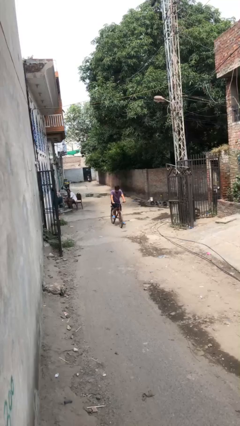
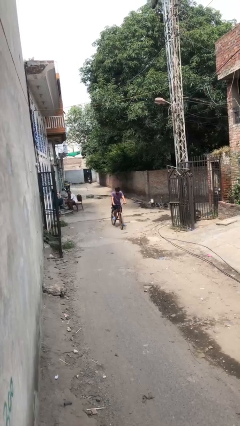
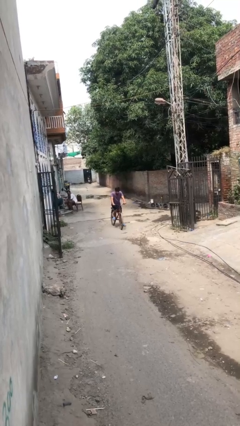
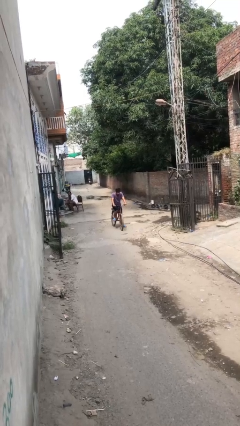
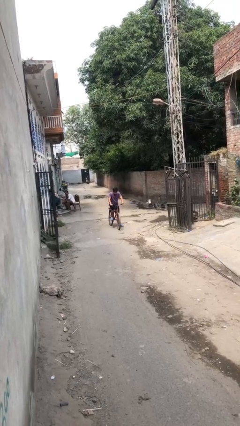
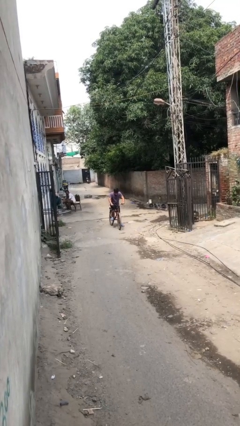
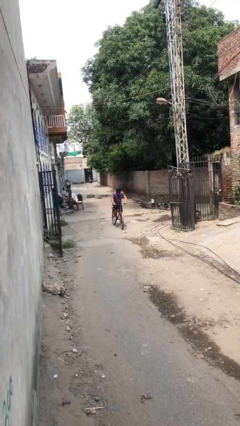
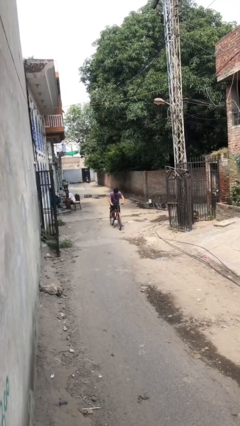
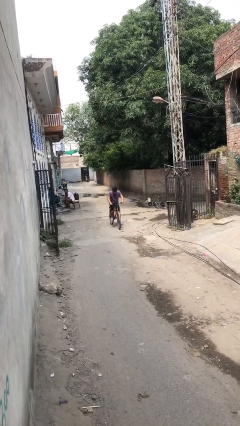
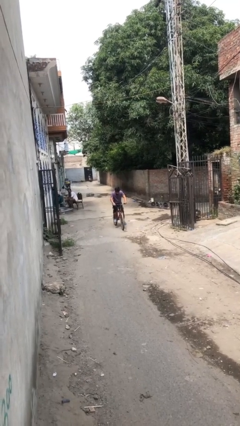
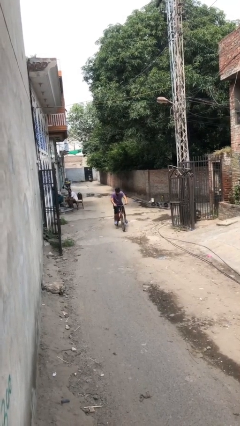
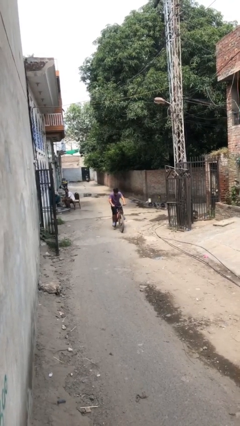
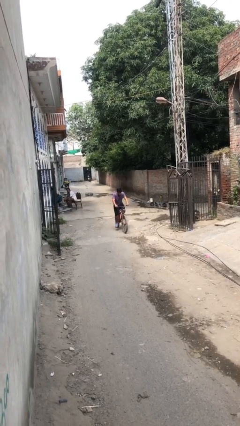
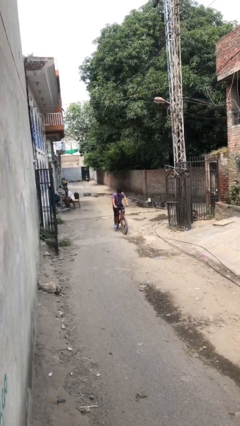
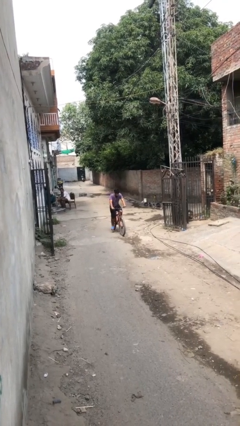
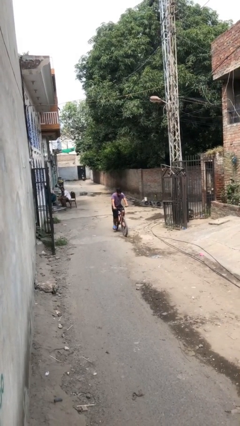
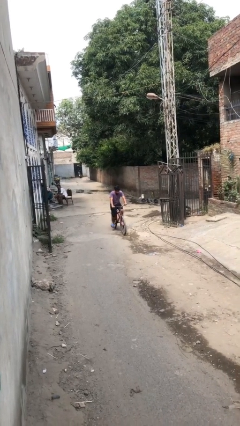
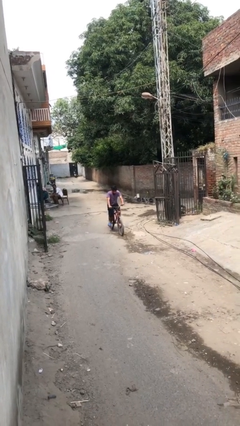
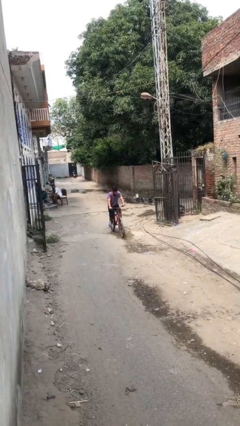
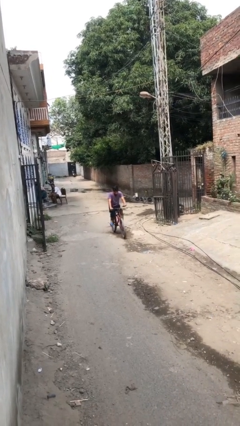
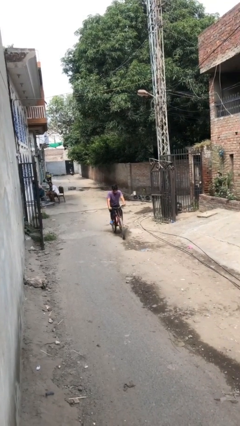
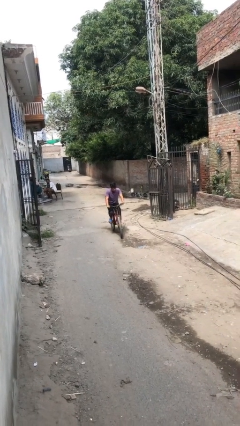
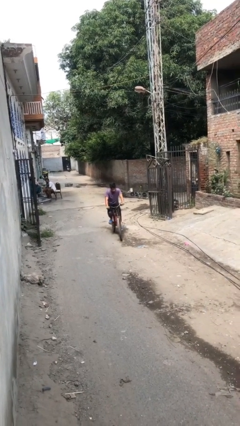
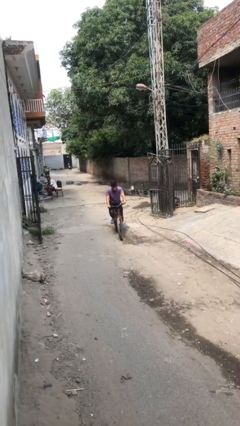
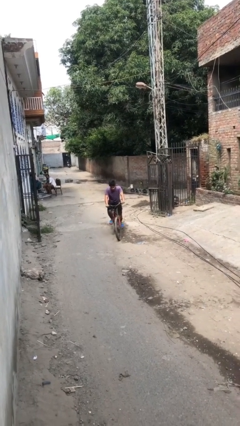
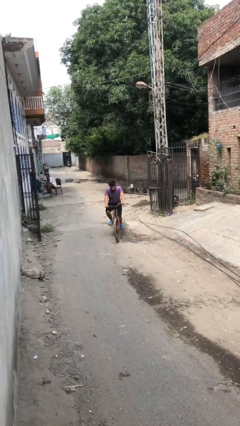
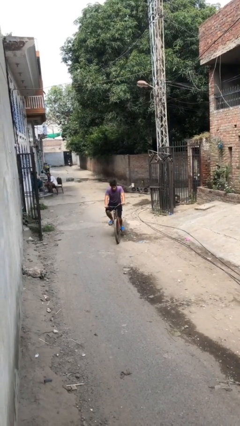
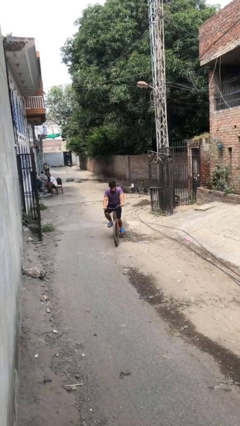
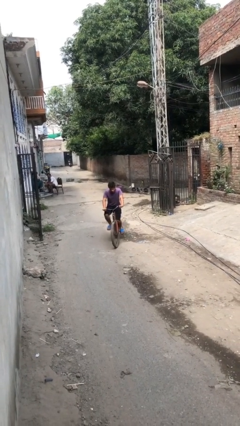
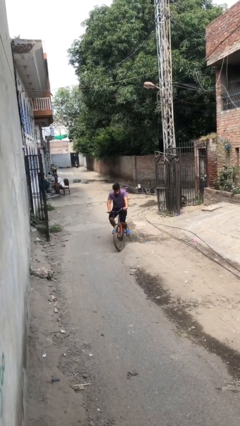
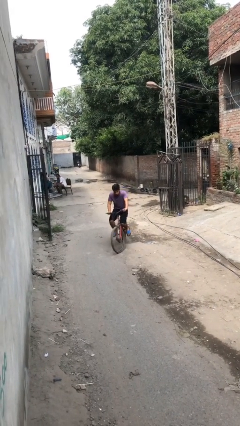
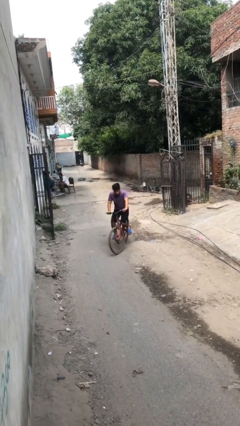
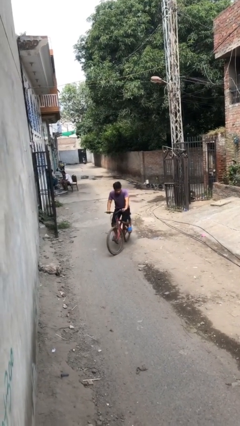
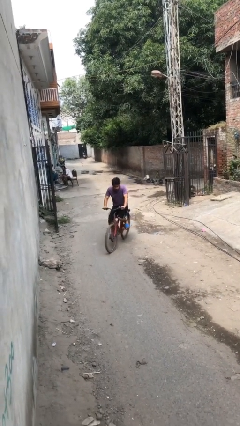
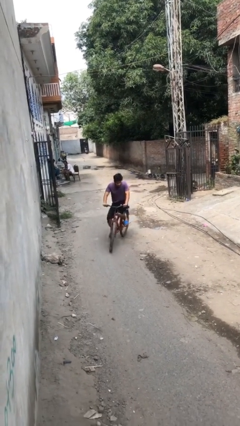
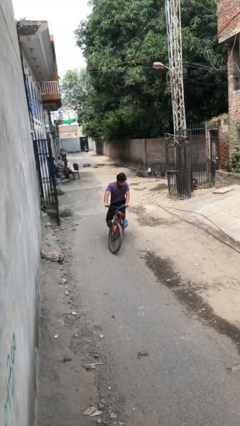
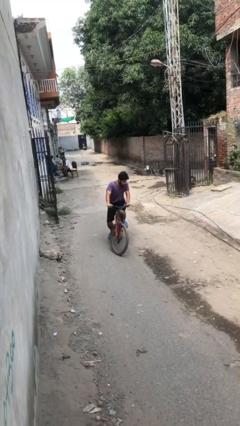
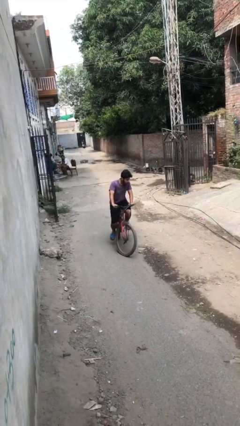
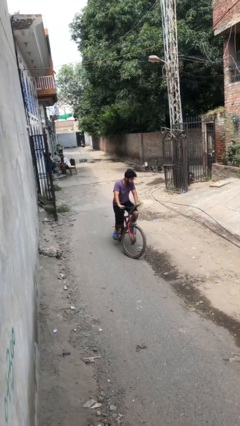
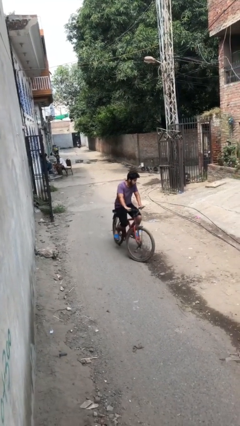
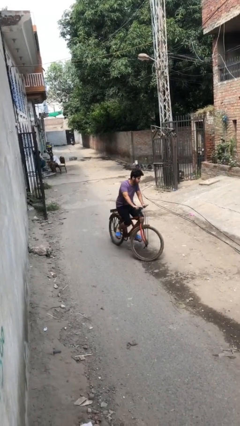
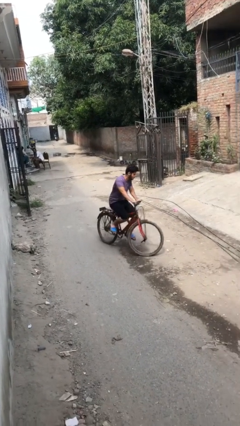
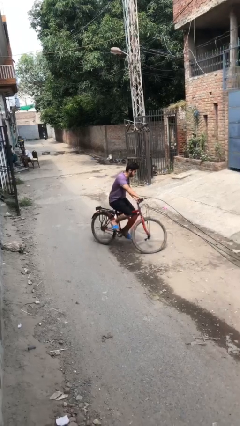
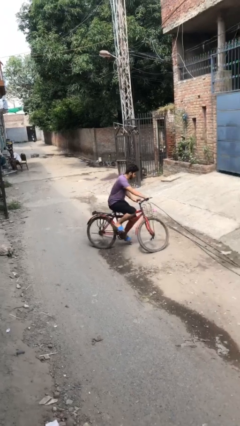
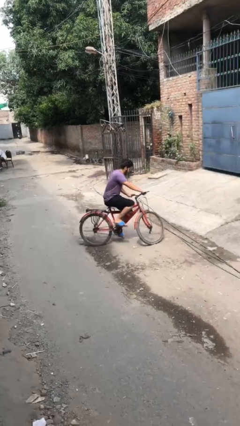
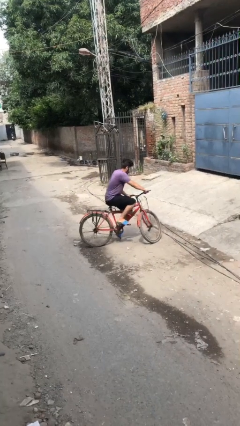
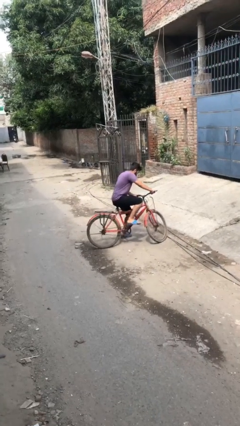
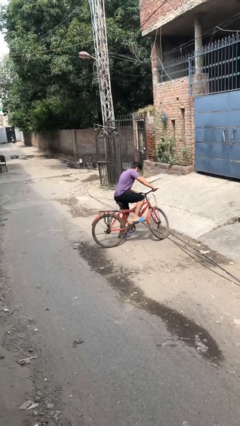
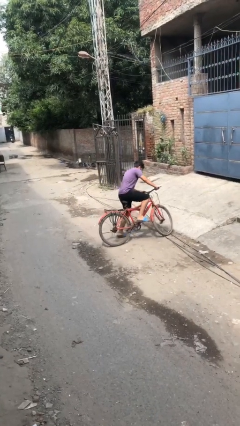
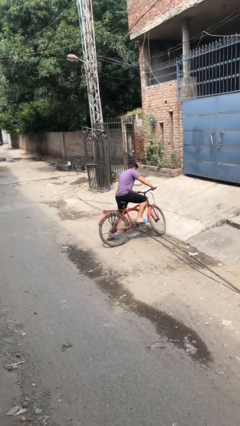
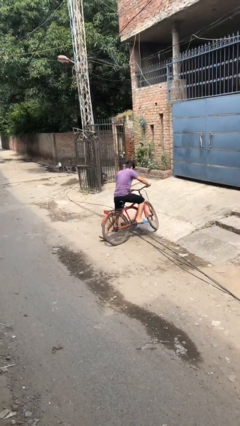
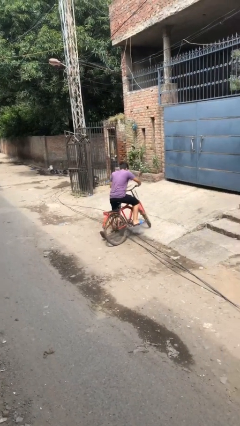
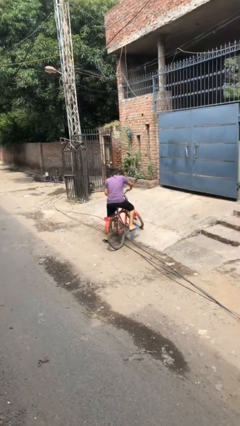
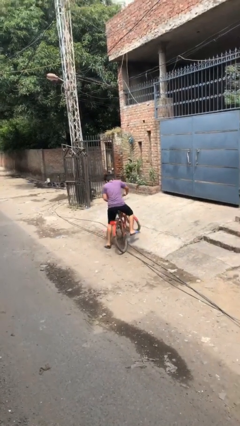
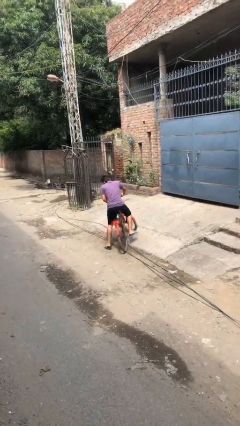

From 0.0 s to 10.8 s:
person rides bicycle

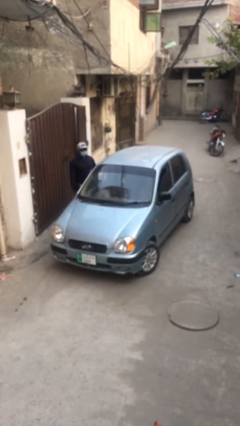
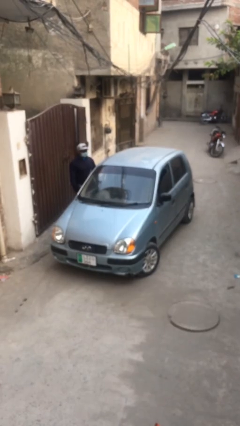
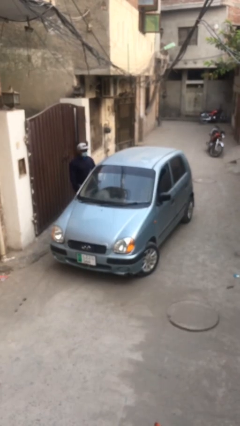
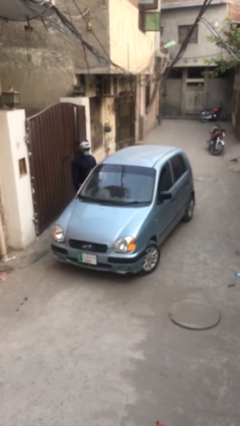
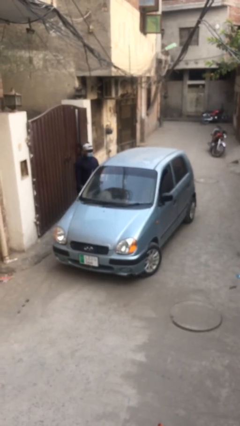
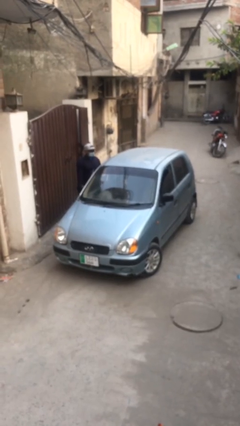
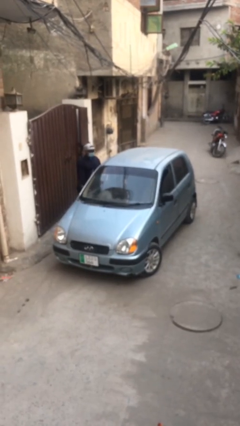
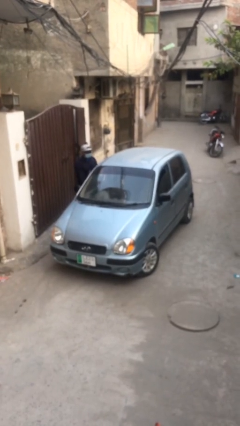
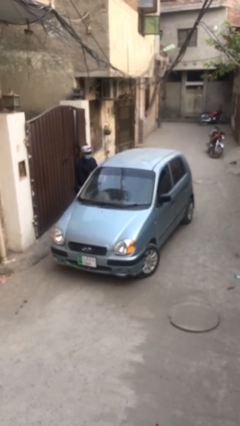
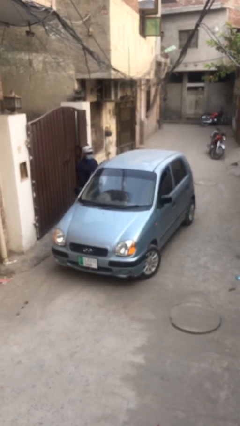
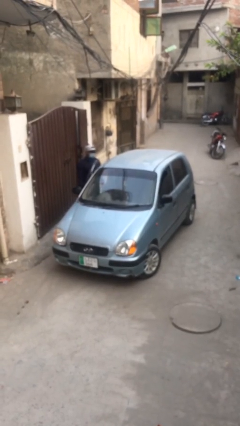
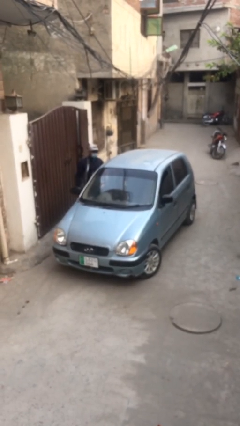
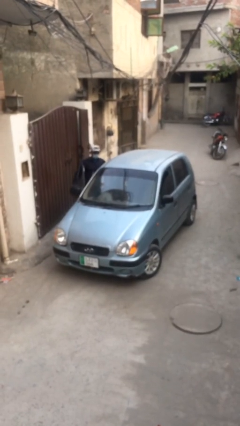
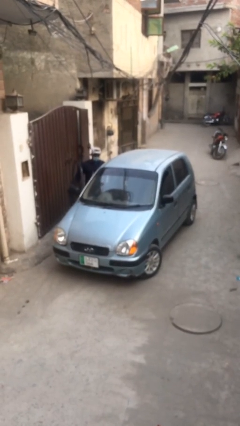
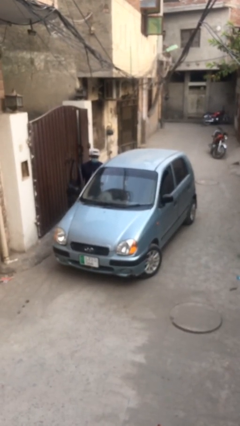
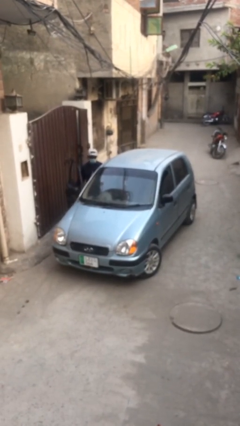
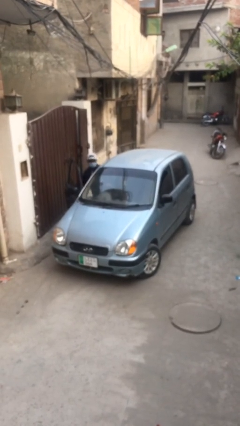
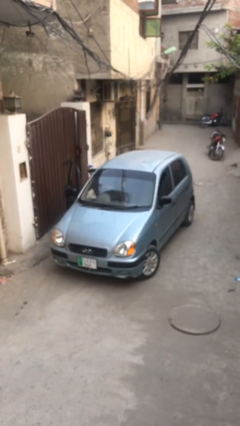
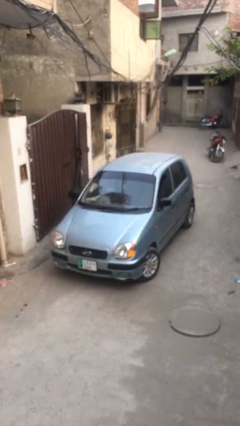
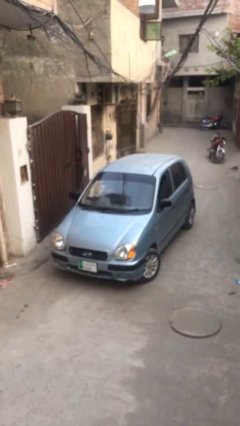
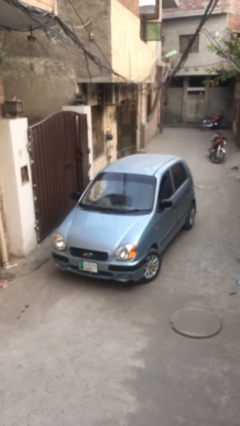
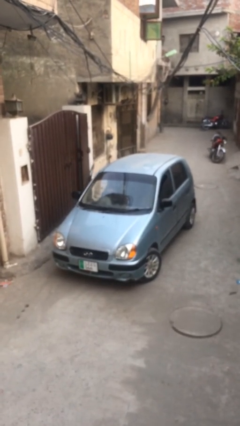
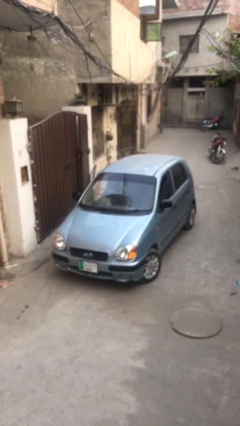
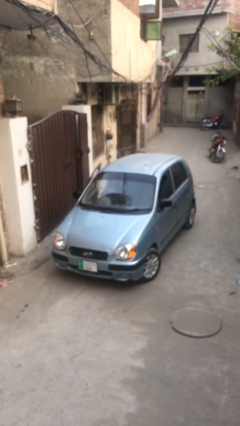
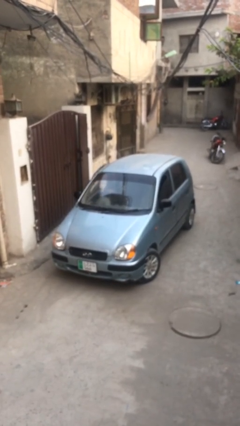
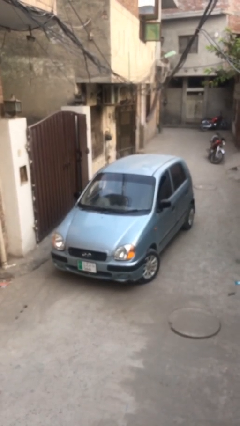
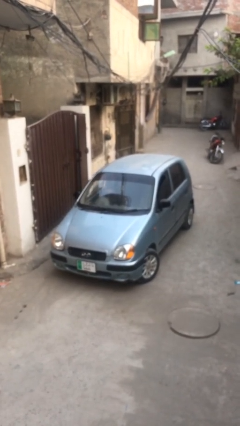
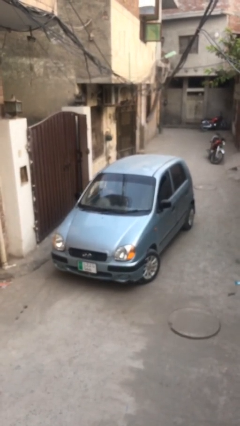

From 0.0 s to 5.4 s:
car picks up person

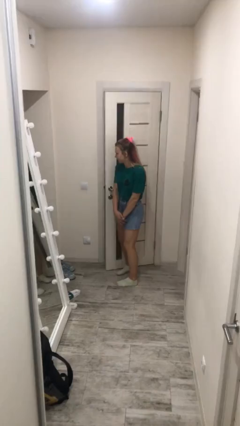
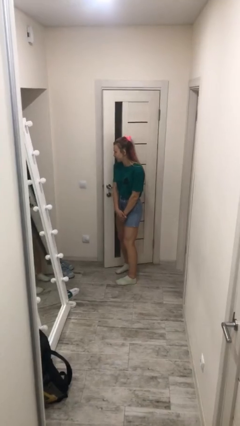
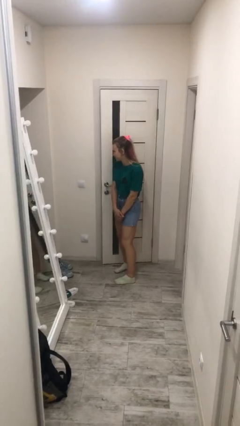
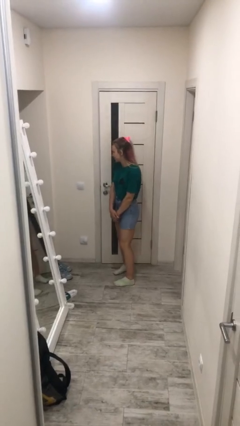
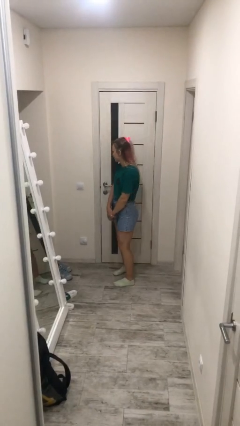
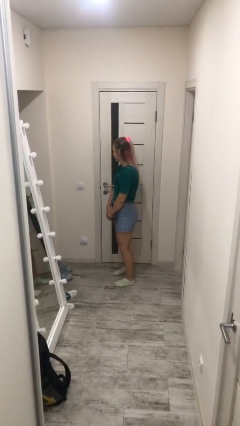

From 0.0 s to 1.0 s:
person closes door with hip

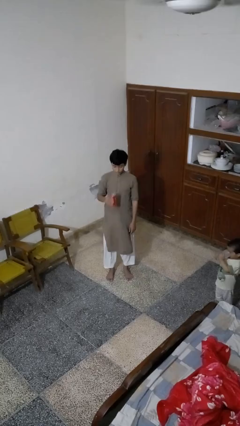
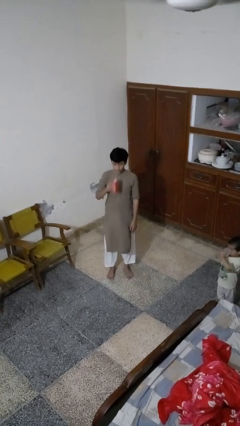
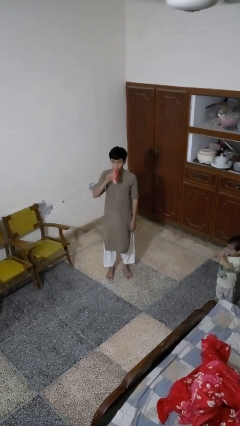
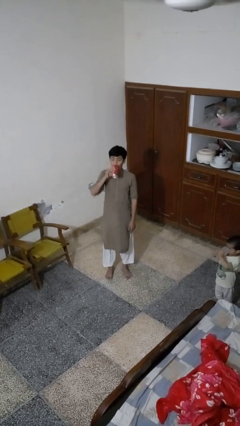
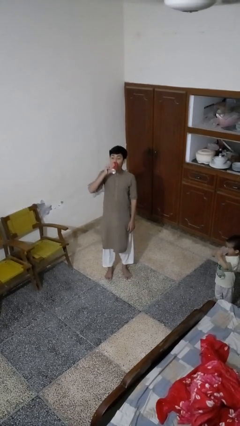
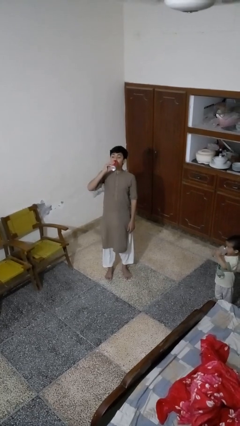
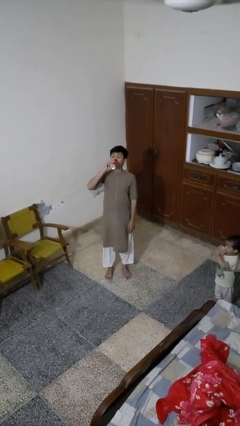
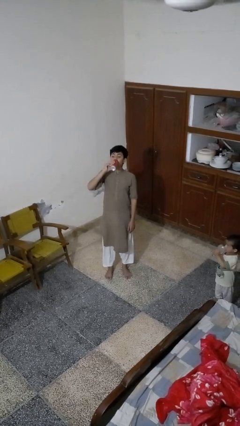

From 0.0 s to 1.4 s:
person drinks from beverage can
